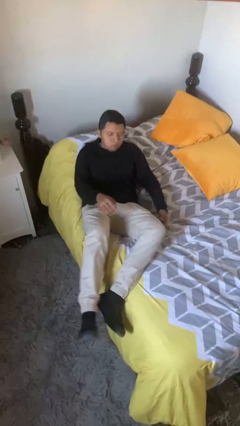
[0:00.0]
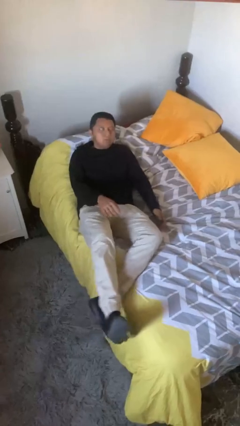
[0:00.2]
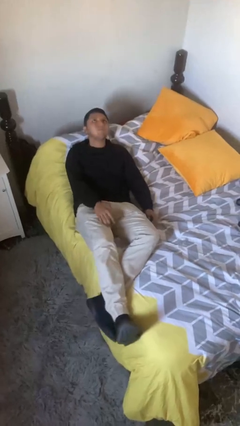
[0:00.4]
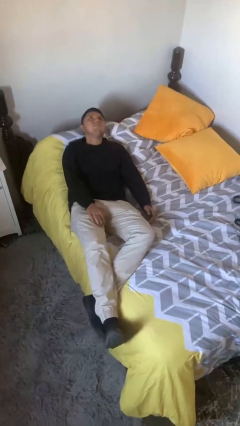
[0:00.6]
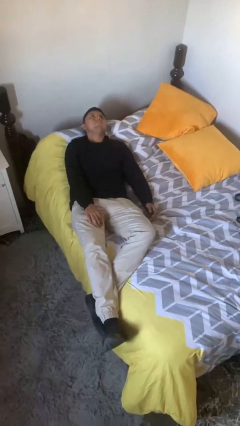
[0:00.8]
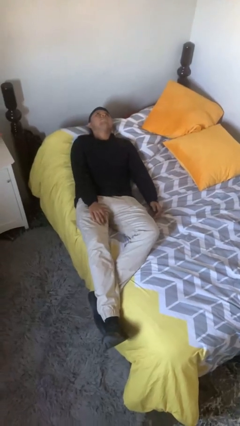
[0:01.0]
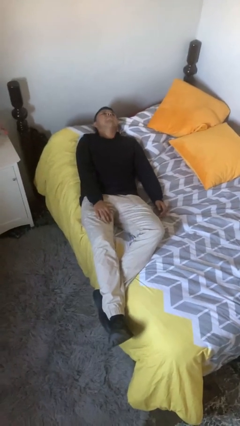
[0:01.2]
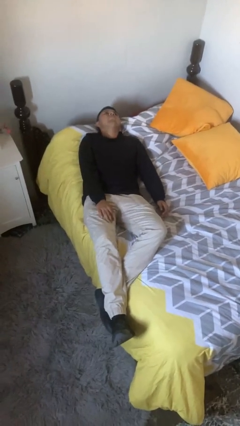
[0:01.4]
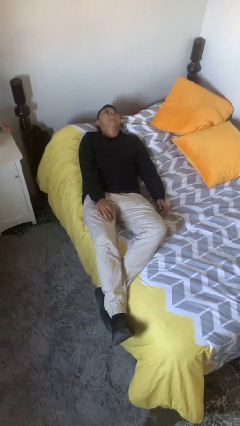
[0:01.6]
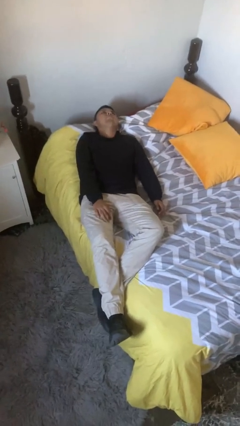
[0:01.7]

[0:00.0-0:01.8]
person lies down on bed

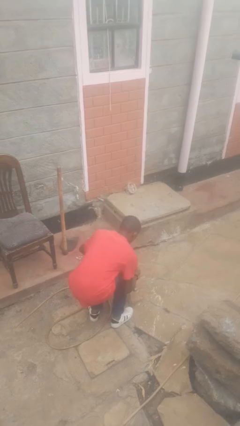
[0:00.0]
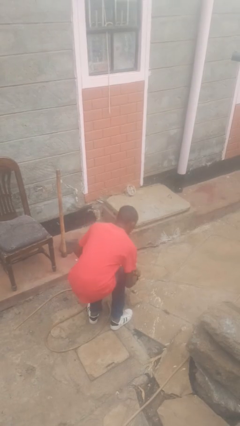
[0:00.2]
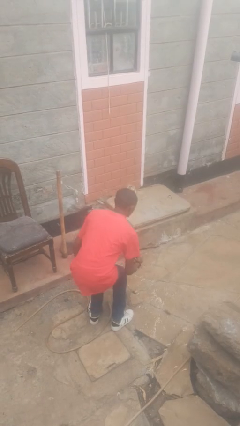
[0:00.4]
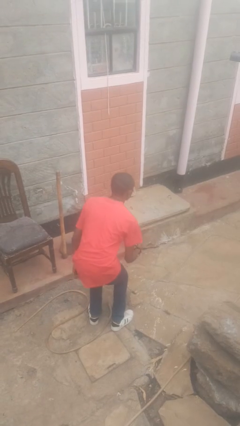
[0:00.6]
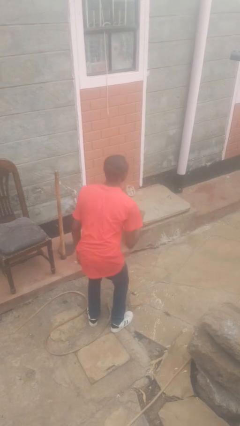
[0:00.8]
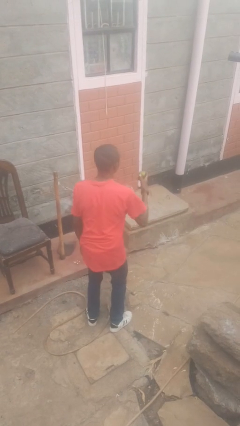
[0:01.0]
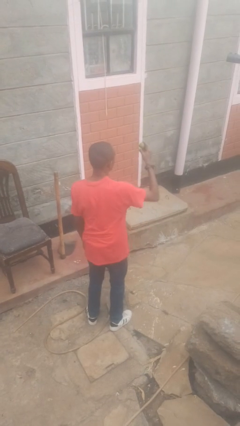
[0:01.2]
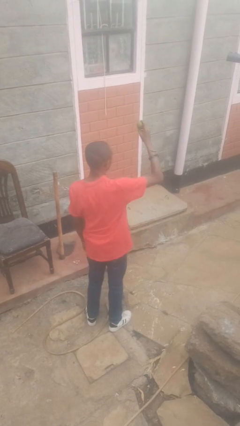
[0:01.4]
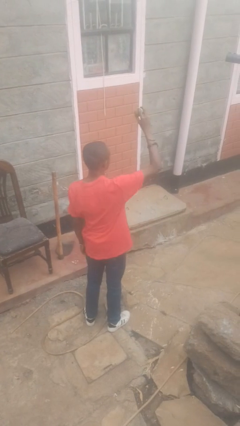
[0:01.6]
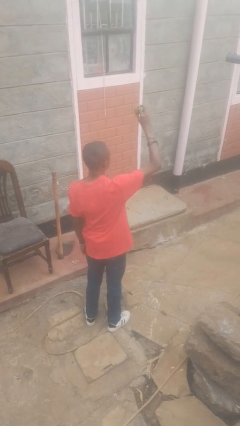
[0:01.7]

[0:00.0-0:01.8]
person catches dropped object

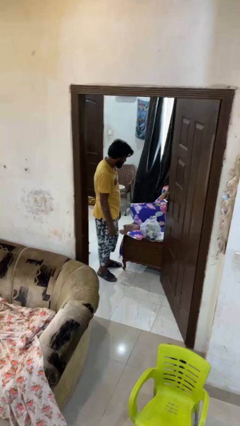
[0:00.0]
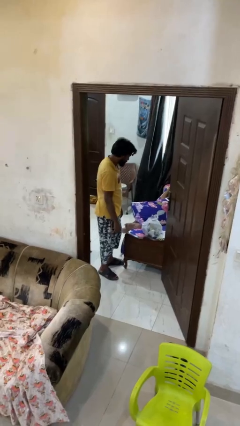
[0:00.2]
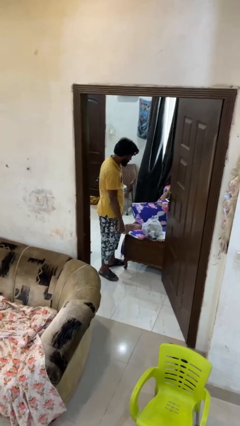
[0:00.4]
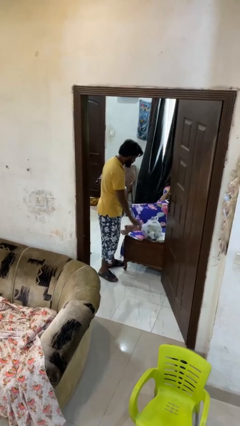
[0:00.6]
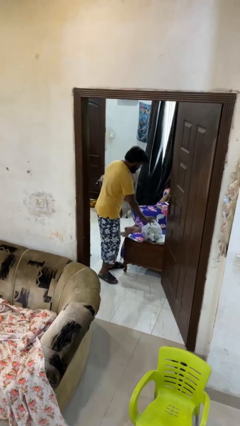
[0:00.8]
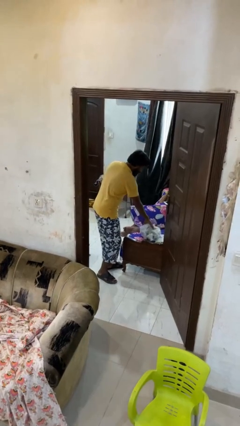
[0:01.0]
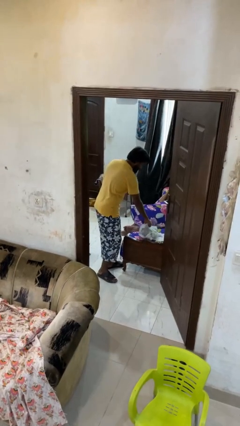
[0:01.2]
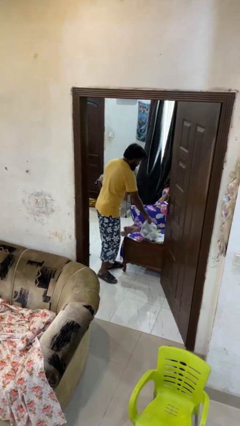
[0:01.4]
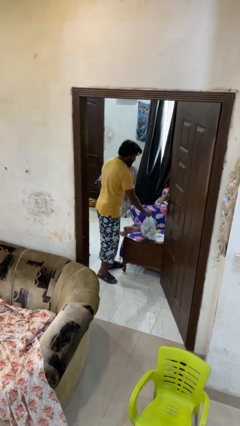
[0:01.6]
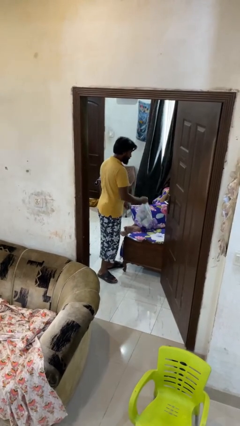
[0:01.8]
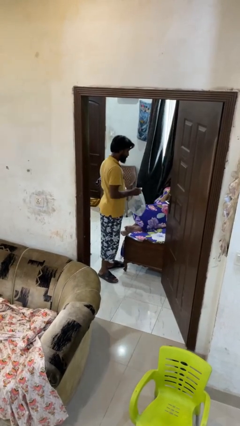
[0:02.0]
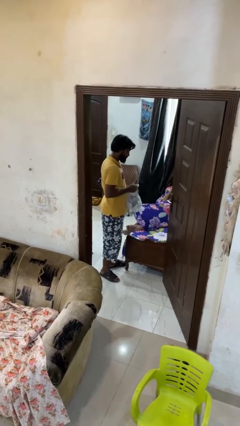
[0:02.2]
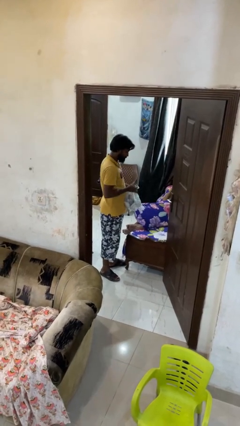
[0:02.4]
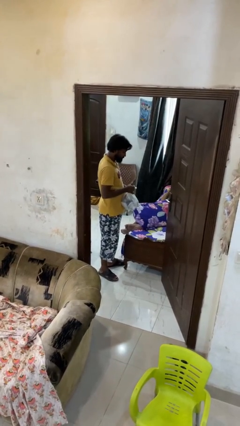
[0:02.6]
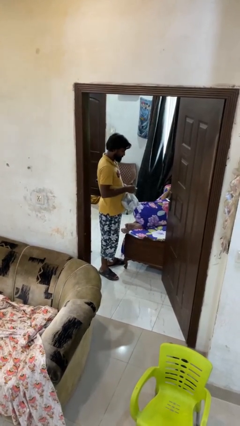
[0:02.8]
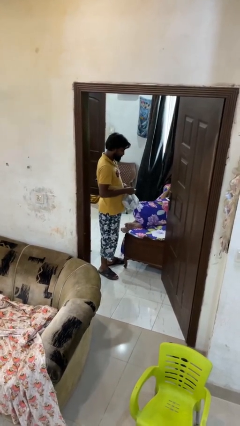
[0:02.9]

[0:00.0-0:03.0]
person picks up object from bed

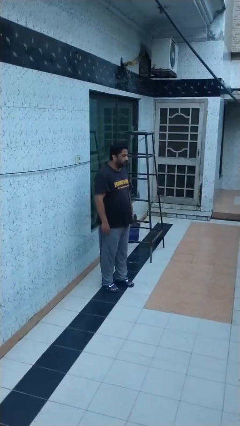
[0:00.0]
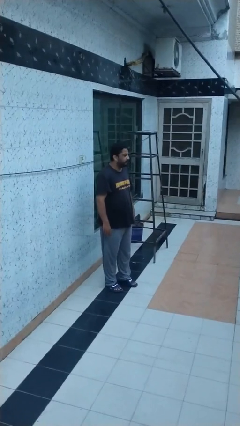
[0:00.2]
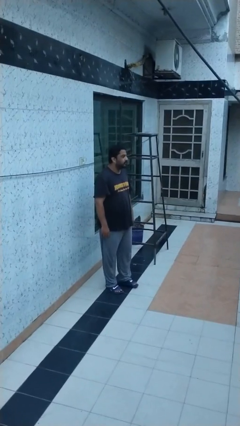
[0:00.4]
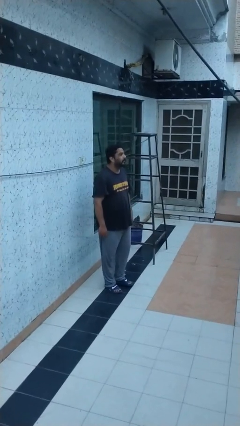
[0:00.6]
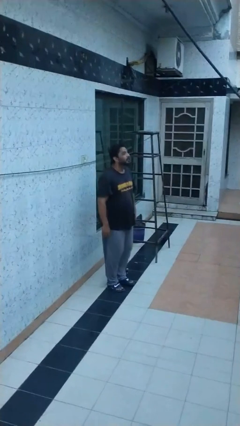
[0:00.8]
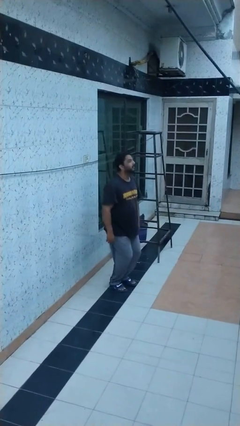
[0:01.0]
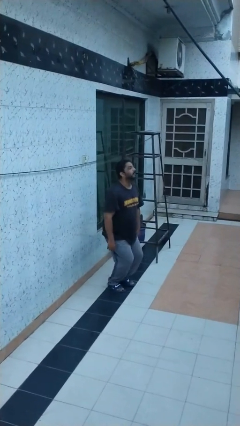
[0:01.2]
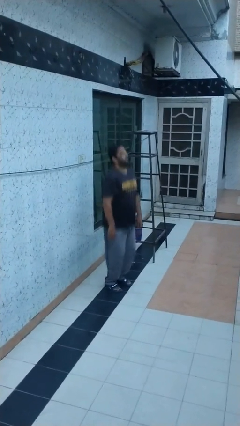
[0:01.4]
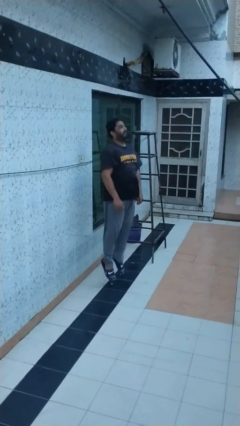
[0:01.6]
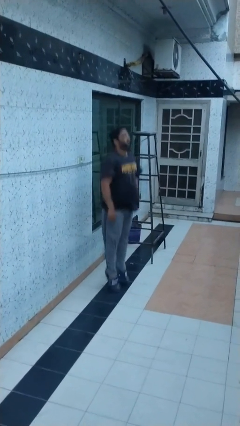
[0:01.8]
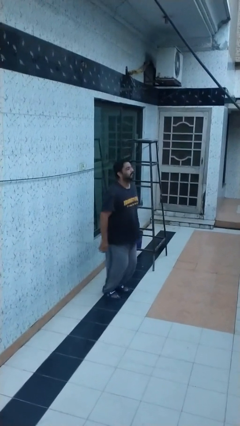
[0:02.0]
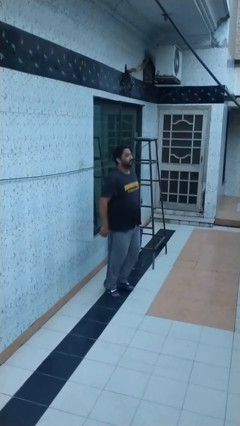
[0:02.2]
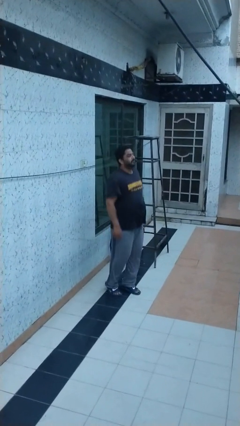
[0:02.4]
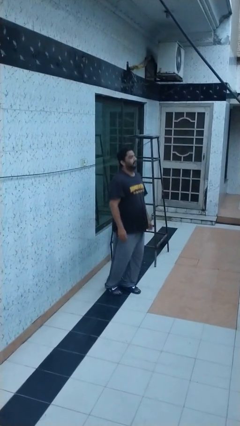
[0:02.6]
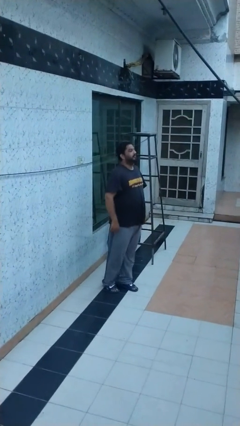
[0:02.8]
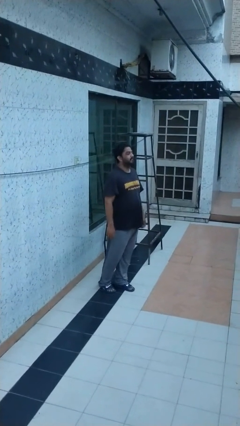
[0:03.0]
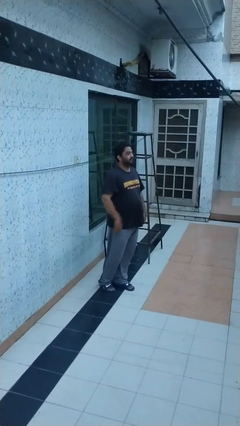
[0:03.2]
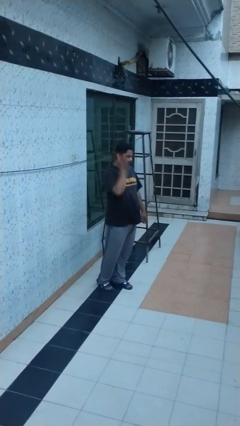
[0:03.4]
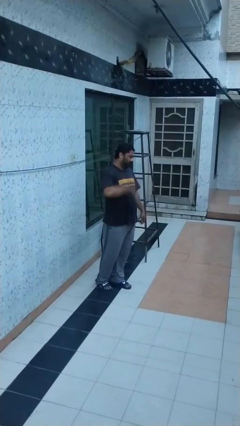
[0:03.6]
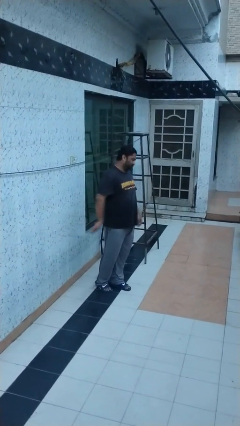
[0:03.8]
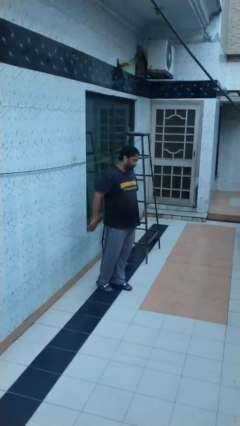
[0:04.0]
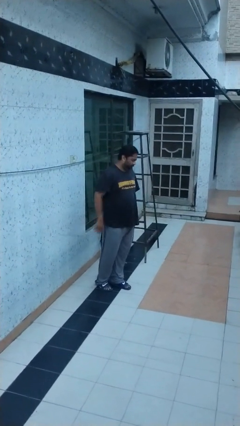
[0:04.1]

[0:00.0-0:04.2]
person jumps

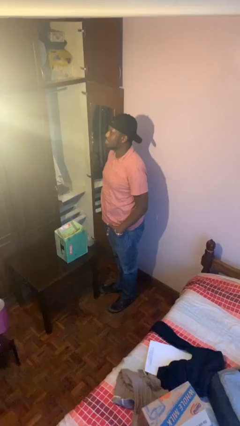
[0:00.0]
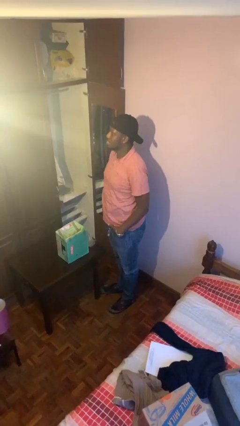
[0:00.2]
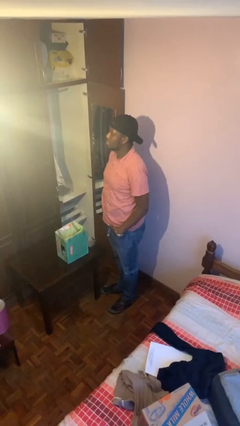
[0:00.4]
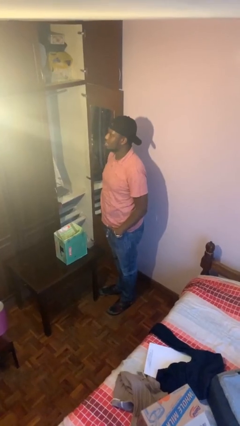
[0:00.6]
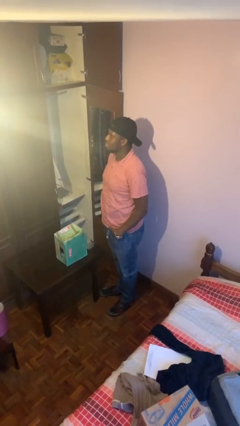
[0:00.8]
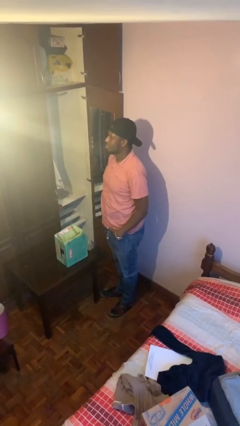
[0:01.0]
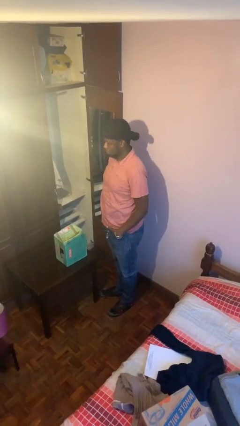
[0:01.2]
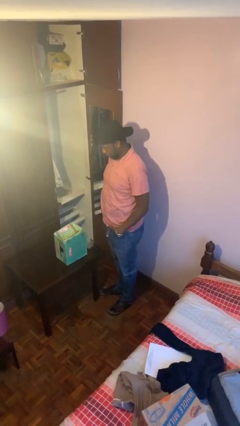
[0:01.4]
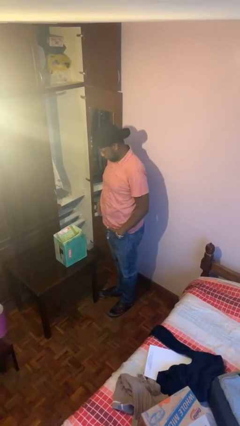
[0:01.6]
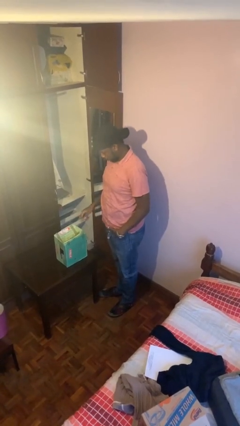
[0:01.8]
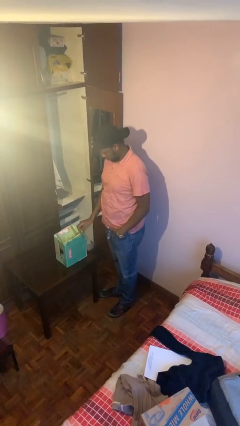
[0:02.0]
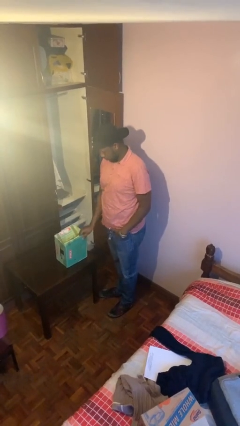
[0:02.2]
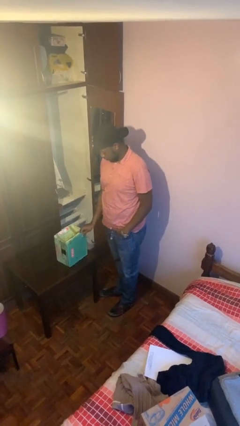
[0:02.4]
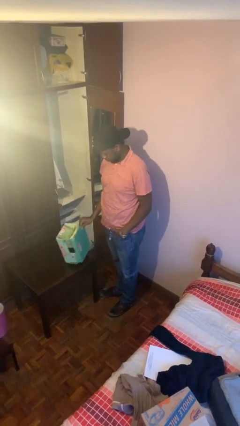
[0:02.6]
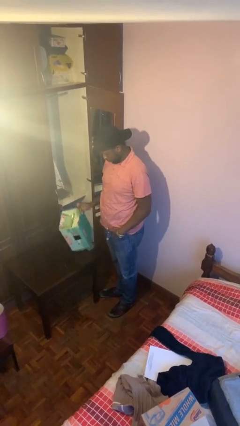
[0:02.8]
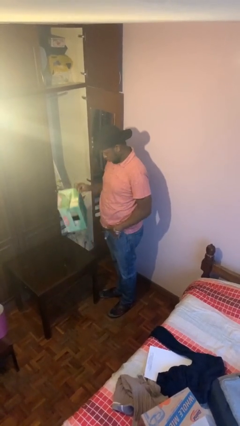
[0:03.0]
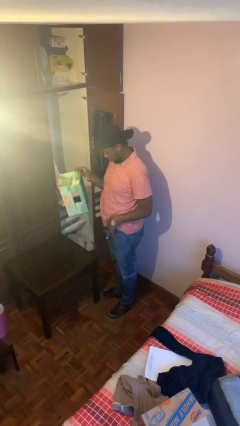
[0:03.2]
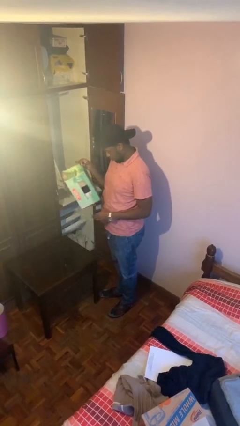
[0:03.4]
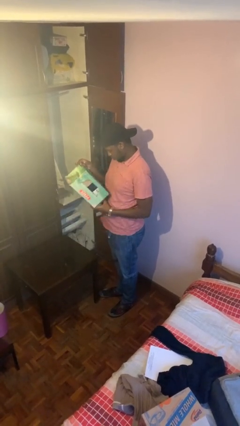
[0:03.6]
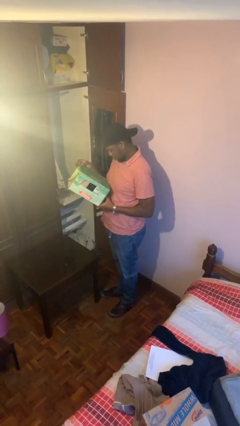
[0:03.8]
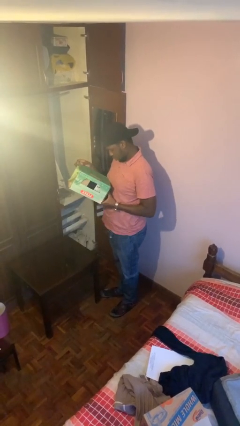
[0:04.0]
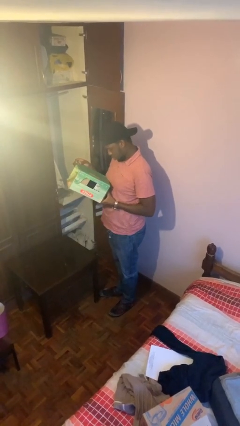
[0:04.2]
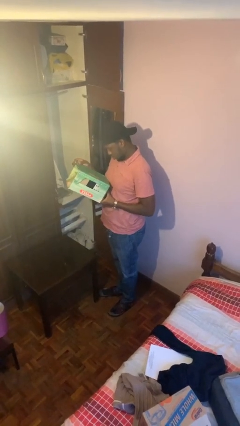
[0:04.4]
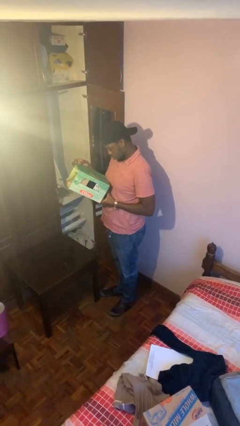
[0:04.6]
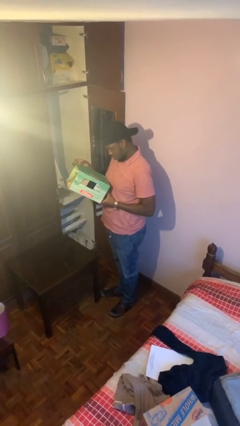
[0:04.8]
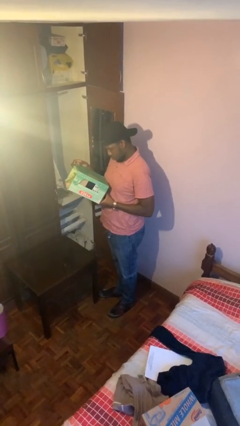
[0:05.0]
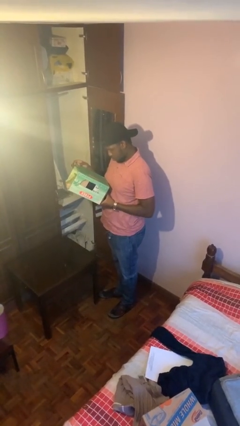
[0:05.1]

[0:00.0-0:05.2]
person picks up object from table

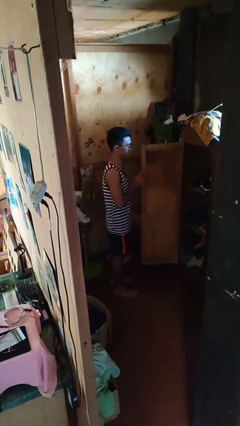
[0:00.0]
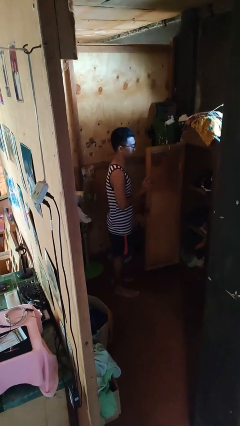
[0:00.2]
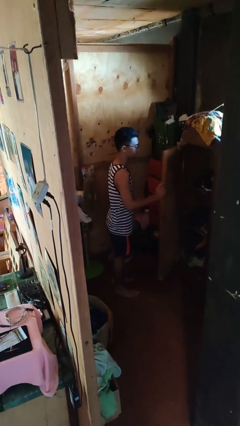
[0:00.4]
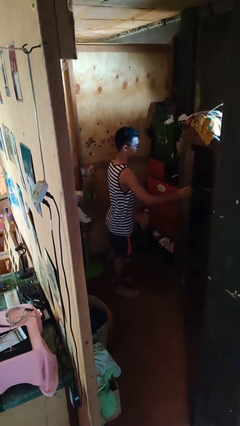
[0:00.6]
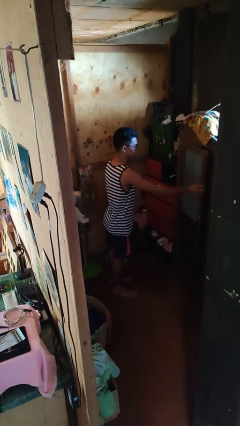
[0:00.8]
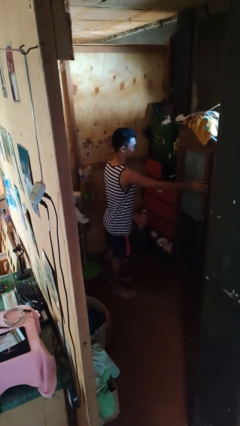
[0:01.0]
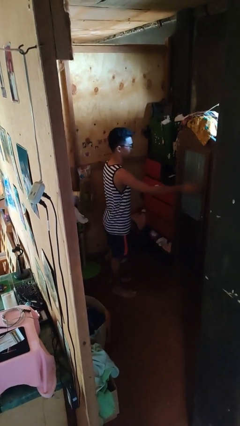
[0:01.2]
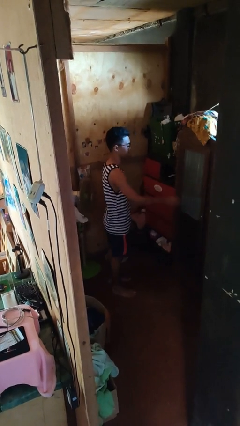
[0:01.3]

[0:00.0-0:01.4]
person closes closet door

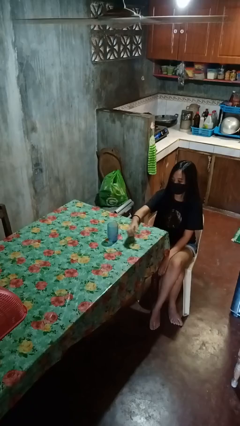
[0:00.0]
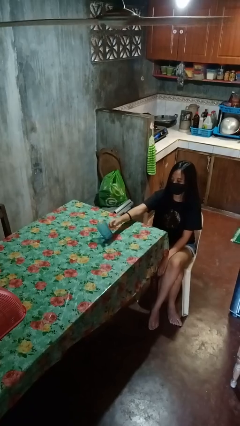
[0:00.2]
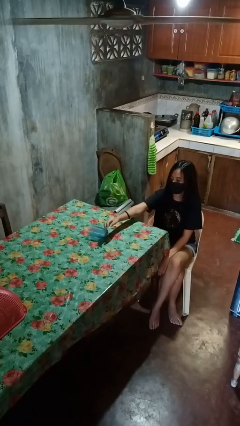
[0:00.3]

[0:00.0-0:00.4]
person knocks over glass
